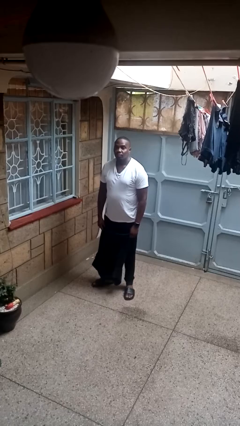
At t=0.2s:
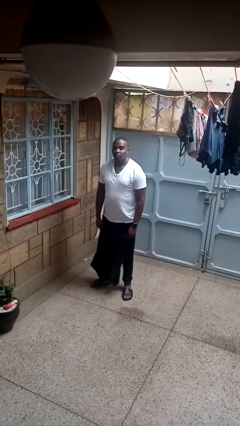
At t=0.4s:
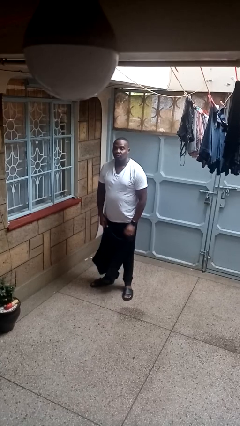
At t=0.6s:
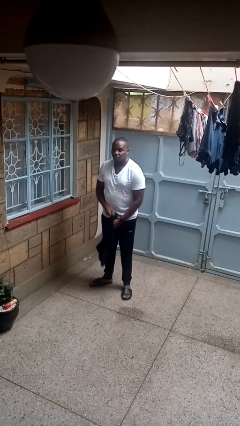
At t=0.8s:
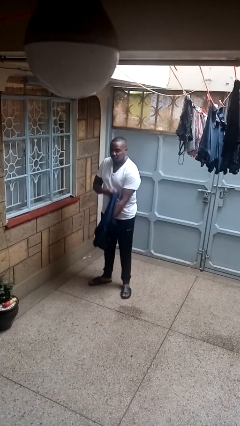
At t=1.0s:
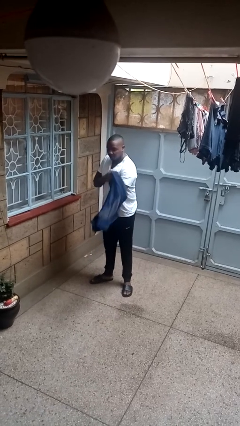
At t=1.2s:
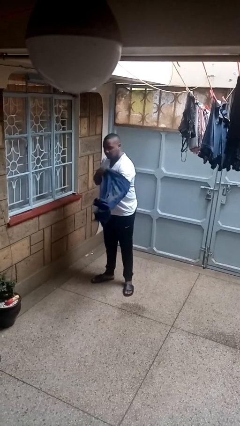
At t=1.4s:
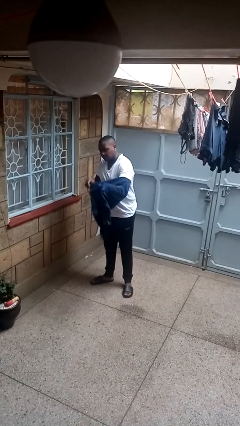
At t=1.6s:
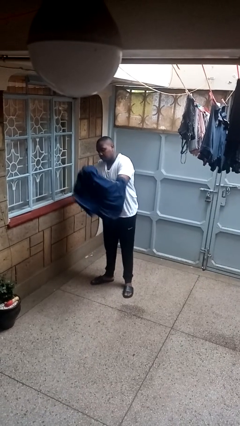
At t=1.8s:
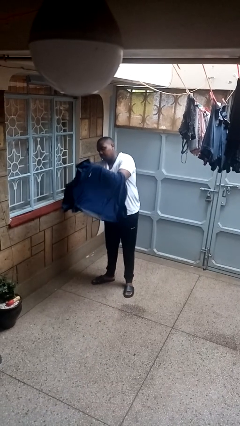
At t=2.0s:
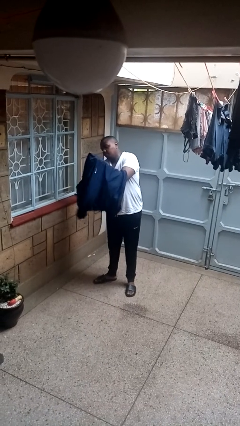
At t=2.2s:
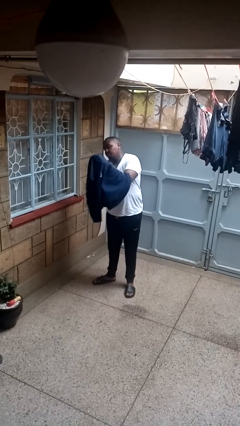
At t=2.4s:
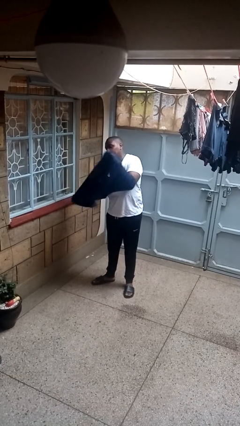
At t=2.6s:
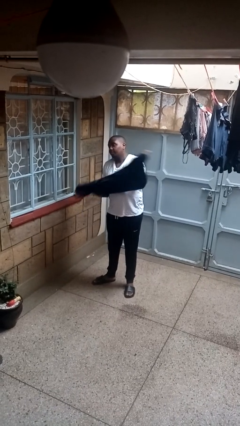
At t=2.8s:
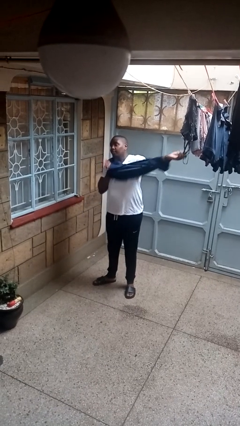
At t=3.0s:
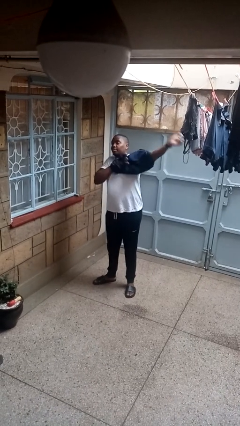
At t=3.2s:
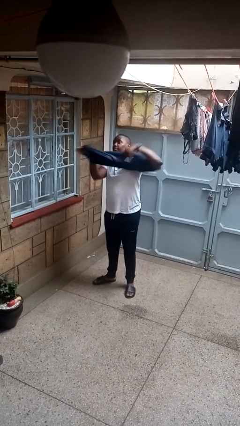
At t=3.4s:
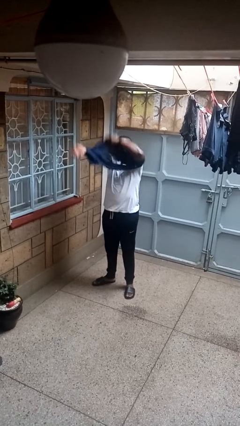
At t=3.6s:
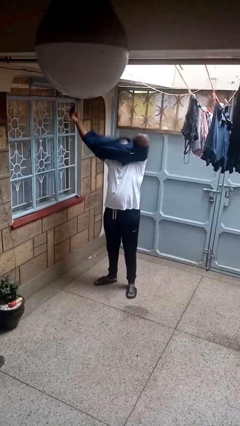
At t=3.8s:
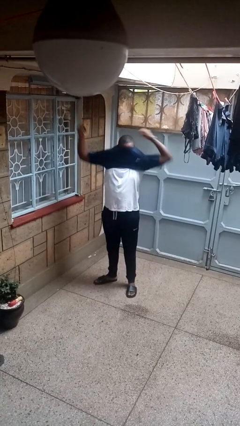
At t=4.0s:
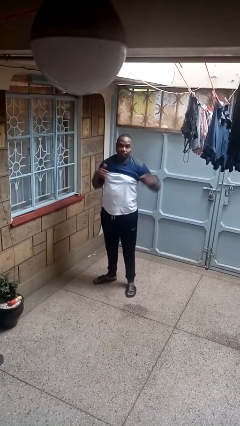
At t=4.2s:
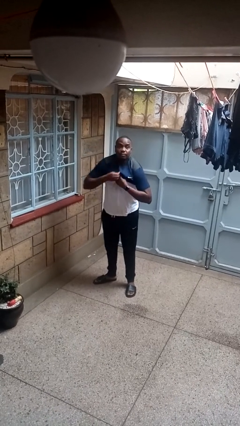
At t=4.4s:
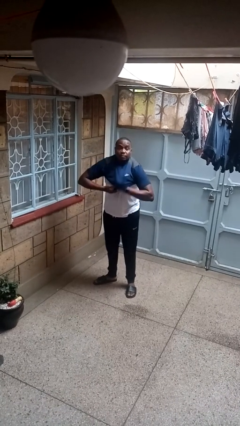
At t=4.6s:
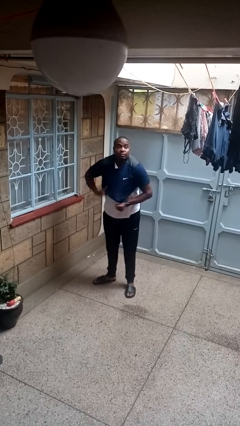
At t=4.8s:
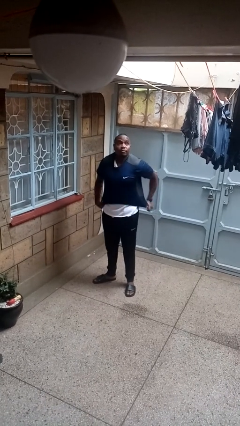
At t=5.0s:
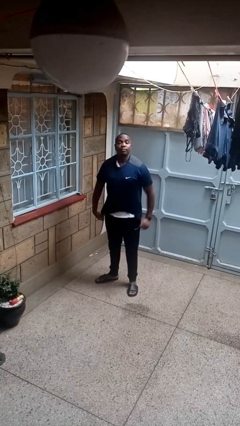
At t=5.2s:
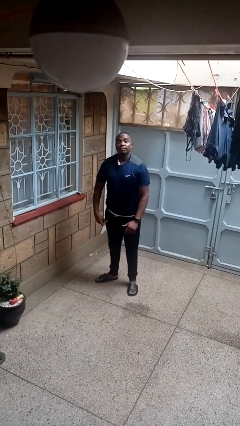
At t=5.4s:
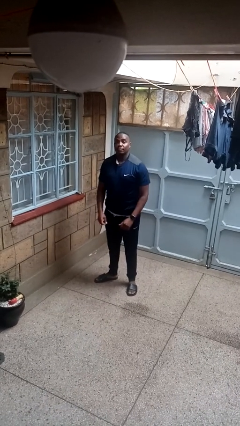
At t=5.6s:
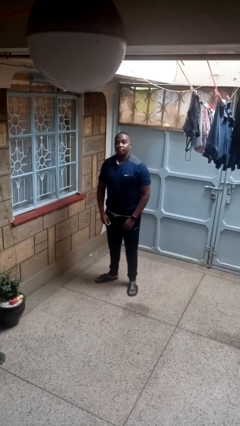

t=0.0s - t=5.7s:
person puts on shirt

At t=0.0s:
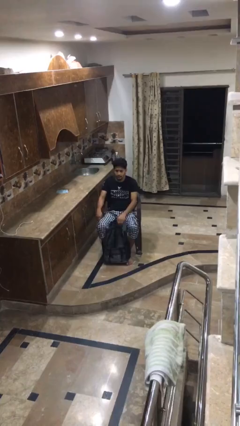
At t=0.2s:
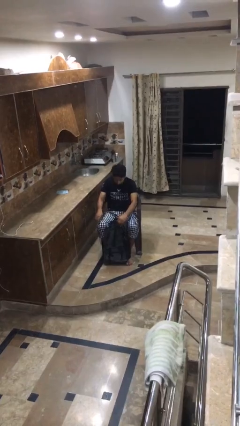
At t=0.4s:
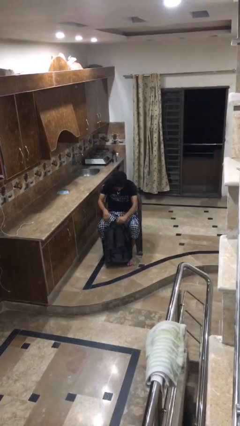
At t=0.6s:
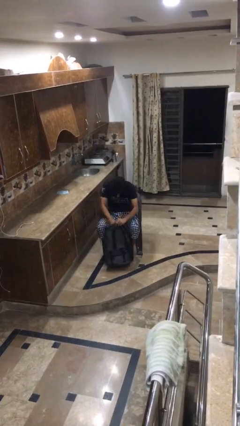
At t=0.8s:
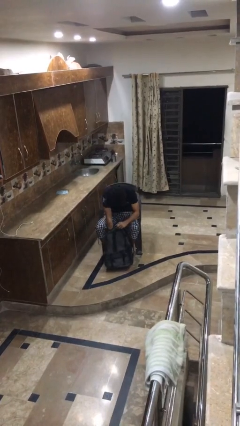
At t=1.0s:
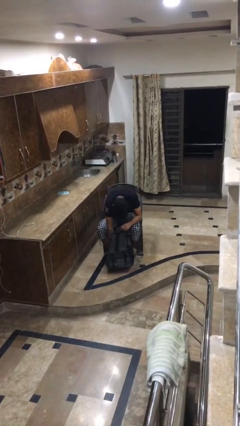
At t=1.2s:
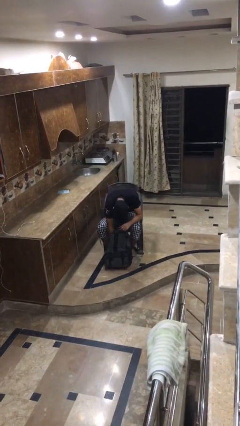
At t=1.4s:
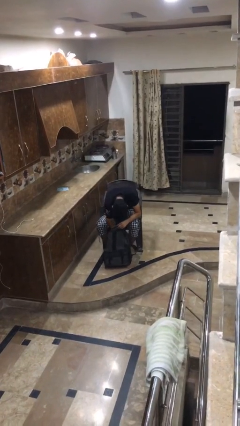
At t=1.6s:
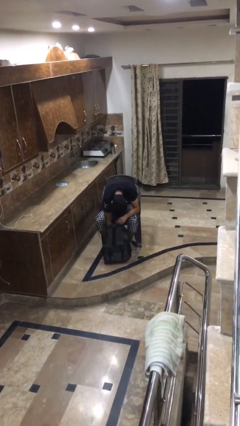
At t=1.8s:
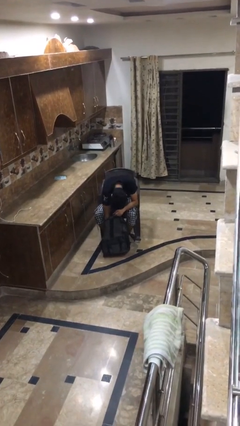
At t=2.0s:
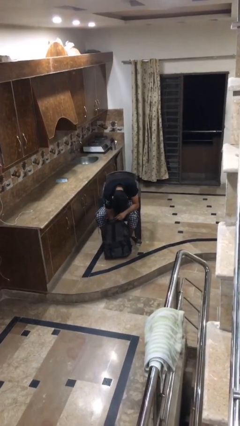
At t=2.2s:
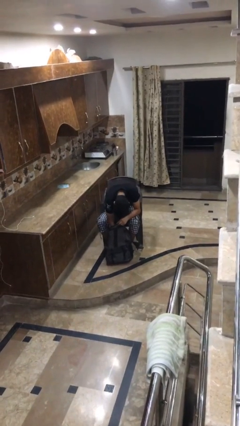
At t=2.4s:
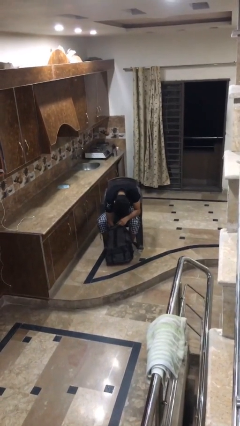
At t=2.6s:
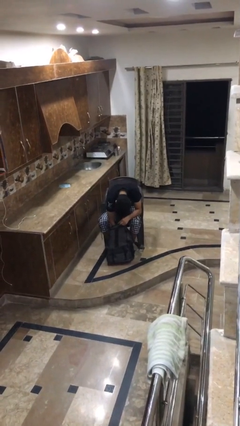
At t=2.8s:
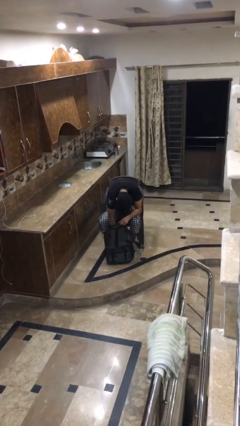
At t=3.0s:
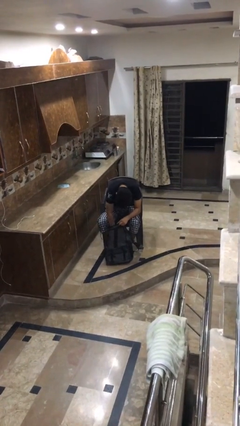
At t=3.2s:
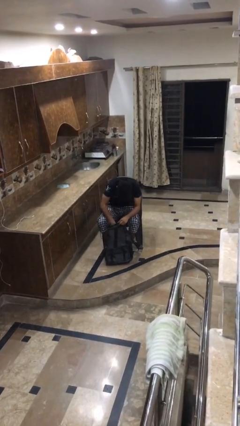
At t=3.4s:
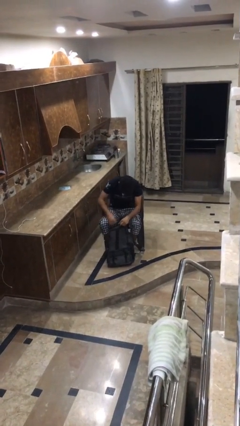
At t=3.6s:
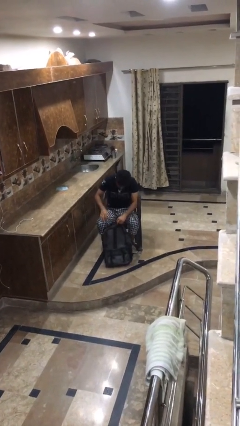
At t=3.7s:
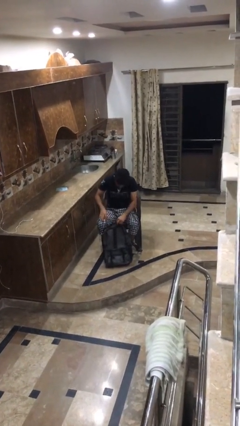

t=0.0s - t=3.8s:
person searches in bag

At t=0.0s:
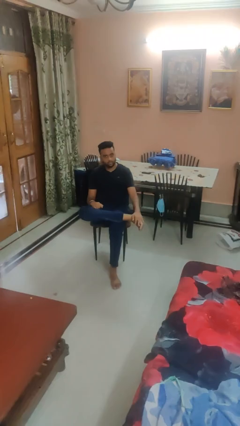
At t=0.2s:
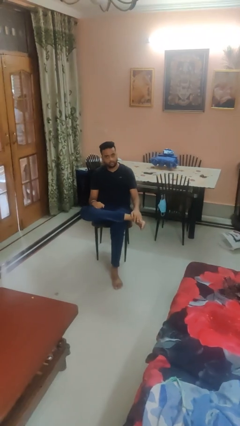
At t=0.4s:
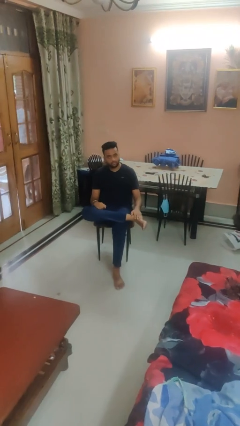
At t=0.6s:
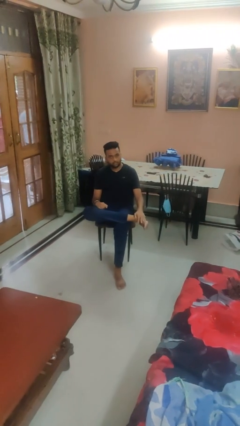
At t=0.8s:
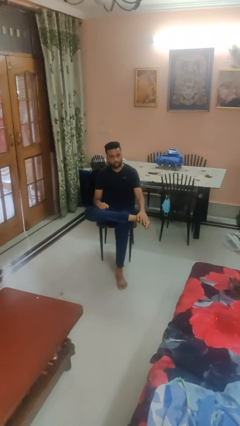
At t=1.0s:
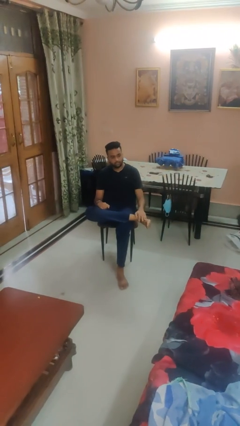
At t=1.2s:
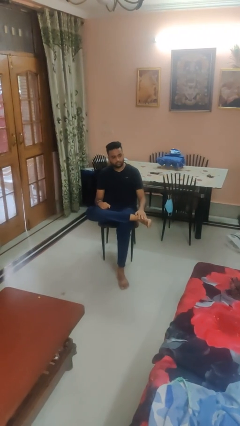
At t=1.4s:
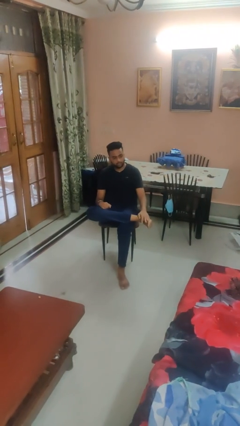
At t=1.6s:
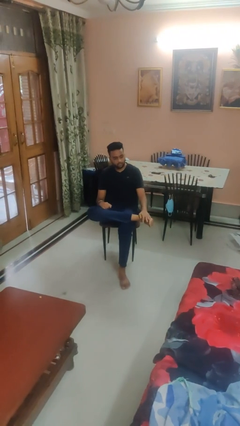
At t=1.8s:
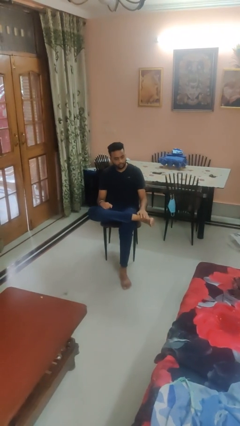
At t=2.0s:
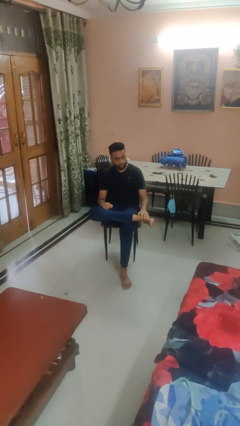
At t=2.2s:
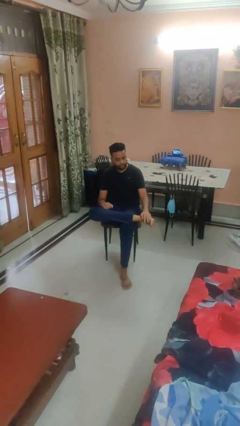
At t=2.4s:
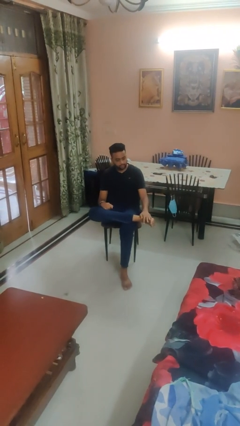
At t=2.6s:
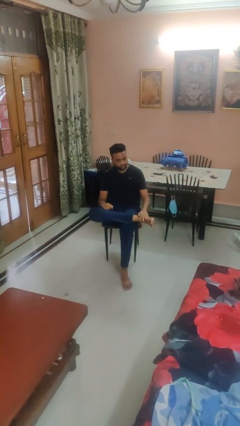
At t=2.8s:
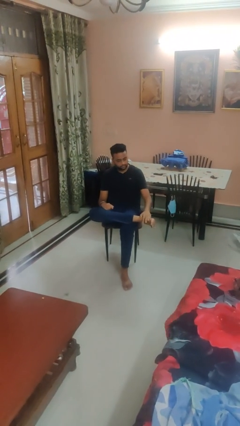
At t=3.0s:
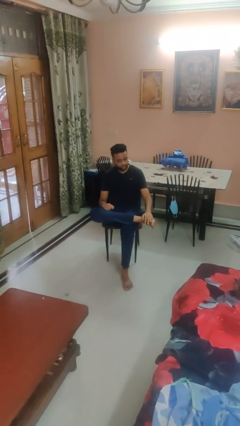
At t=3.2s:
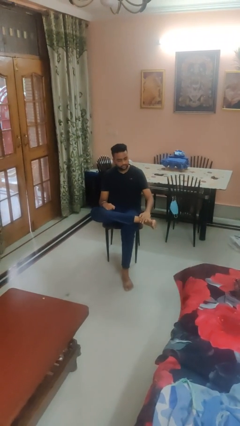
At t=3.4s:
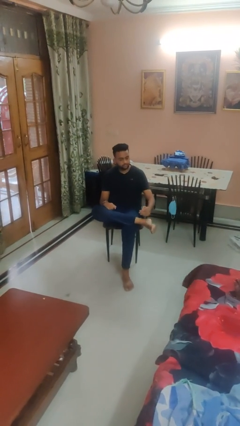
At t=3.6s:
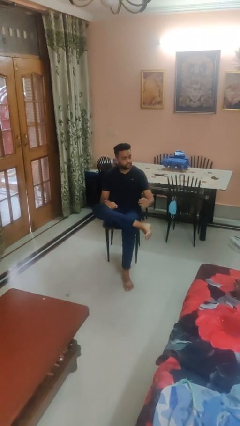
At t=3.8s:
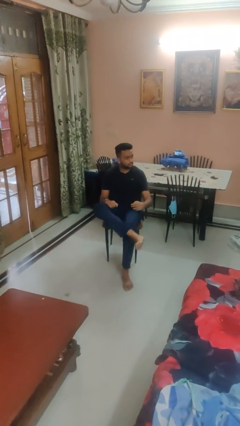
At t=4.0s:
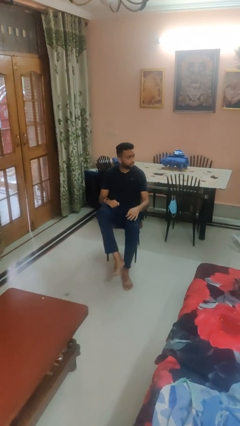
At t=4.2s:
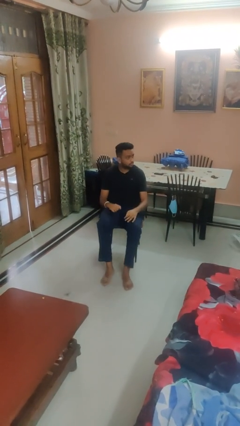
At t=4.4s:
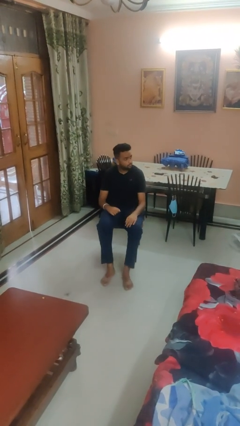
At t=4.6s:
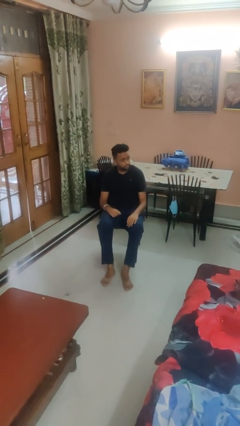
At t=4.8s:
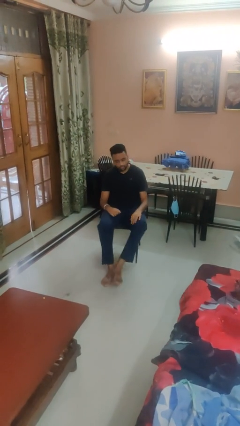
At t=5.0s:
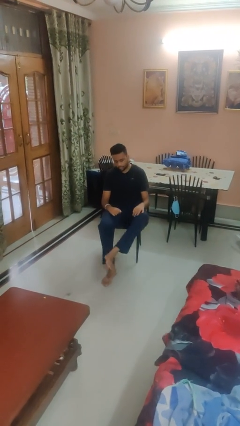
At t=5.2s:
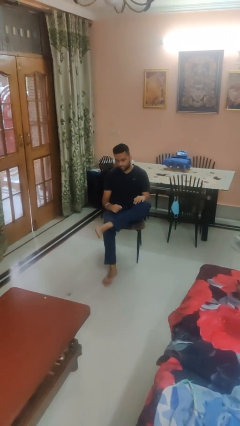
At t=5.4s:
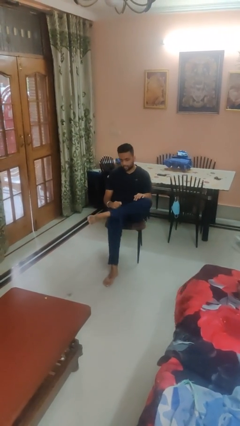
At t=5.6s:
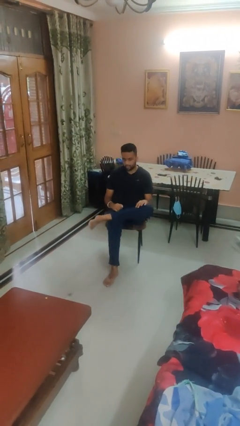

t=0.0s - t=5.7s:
person rubs foot

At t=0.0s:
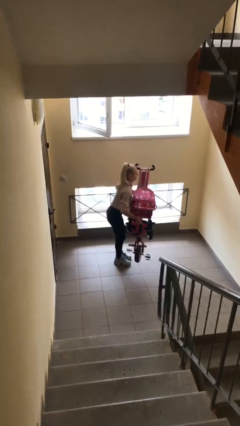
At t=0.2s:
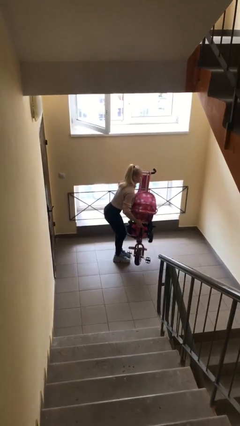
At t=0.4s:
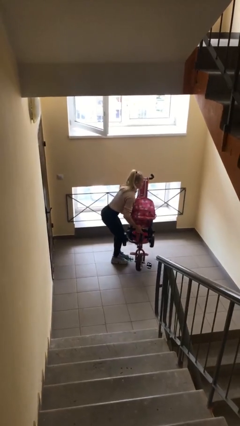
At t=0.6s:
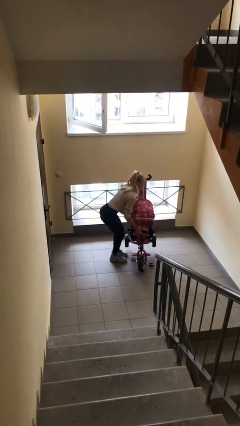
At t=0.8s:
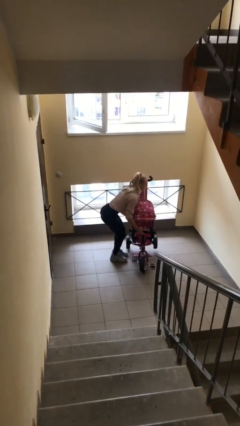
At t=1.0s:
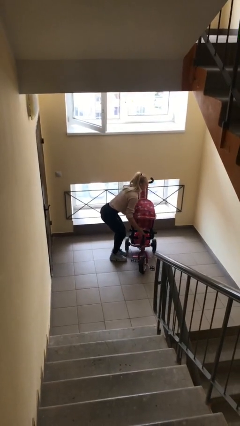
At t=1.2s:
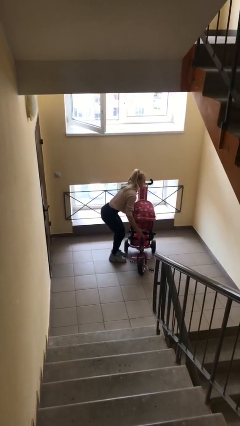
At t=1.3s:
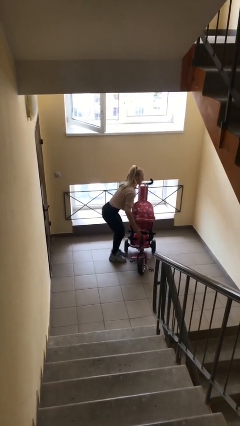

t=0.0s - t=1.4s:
person puts down object on floor

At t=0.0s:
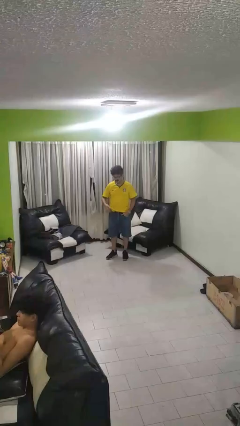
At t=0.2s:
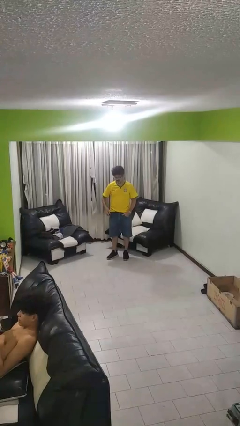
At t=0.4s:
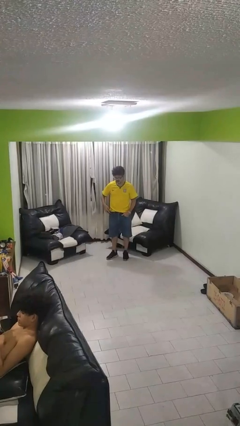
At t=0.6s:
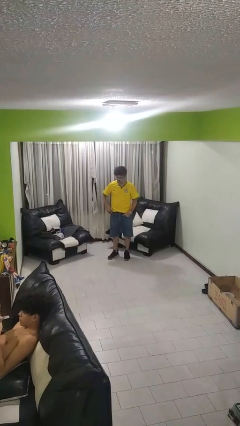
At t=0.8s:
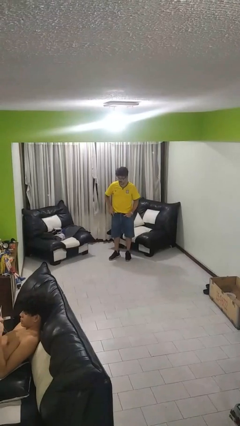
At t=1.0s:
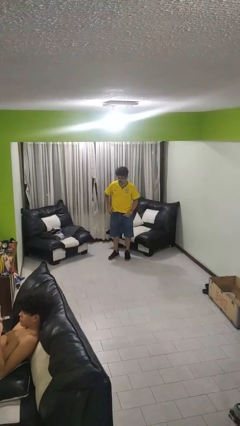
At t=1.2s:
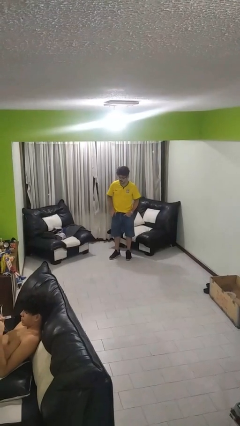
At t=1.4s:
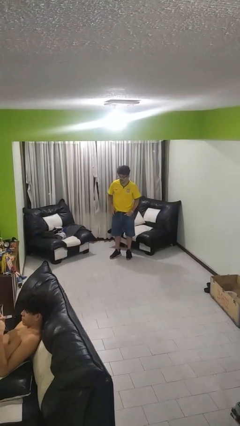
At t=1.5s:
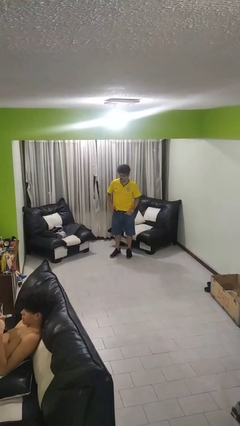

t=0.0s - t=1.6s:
person puts phone into pocket
